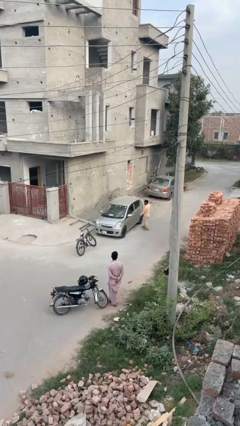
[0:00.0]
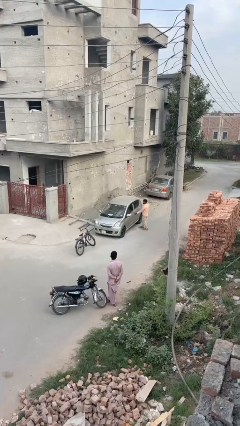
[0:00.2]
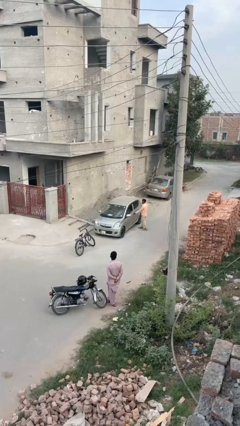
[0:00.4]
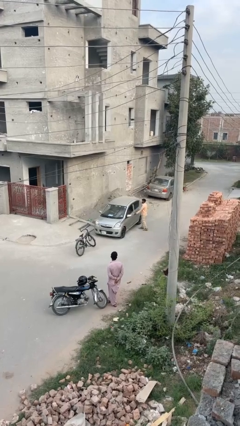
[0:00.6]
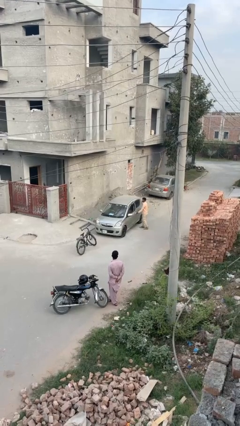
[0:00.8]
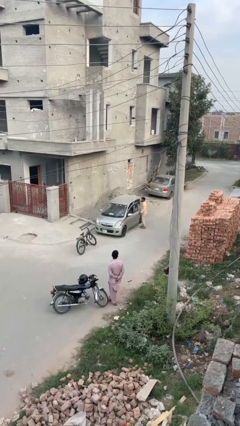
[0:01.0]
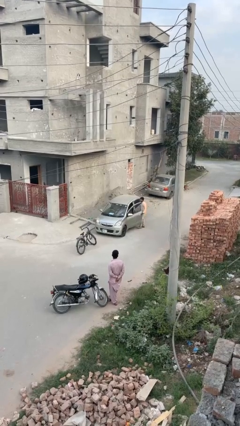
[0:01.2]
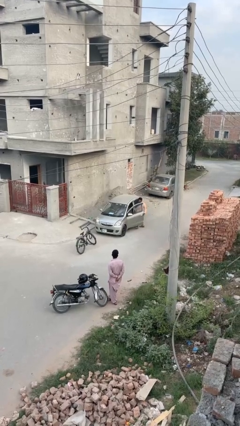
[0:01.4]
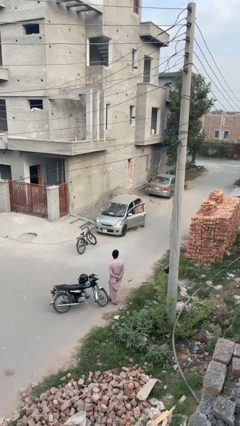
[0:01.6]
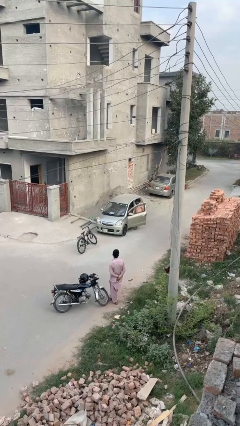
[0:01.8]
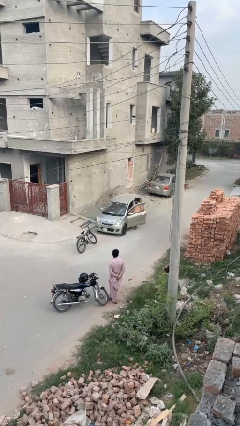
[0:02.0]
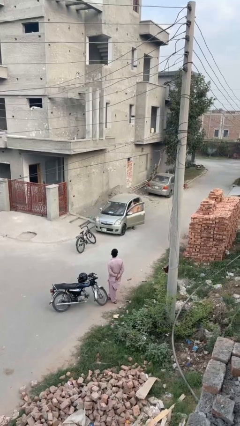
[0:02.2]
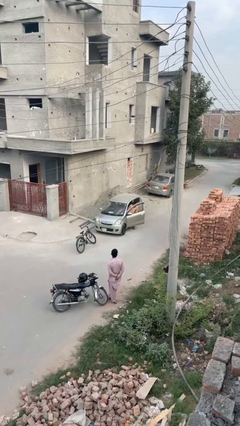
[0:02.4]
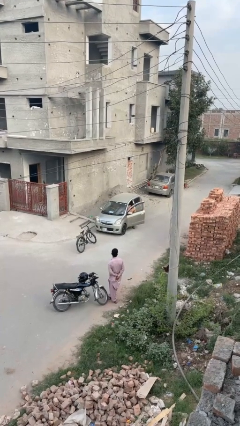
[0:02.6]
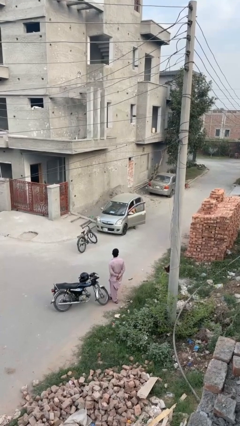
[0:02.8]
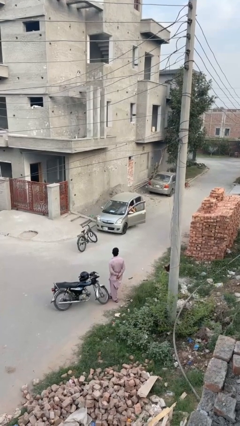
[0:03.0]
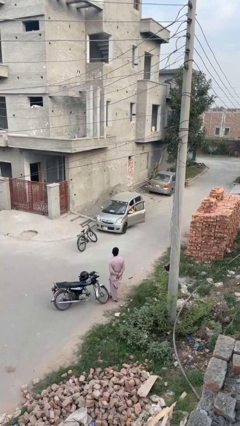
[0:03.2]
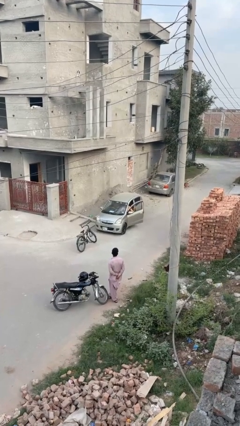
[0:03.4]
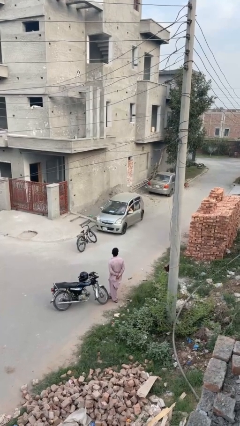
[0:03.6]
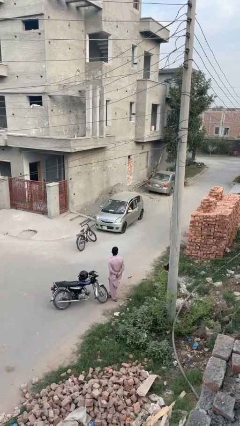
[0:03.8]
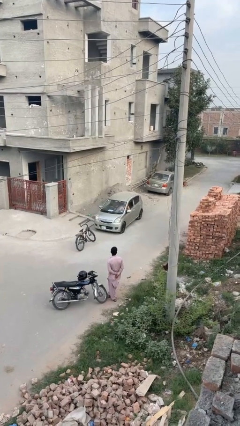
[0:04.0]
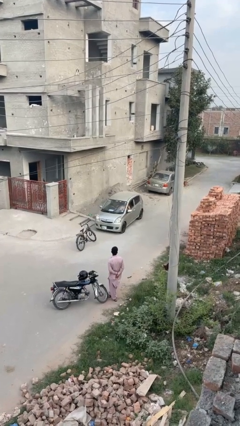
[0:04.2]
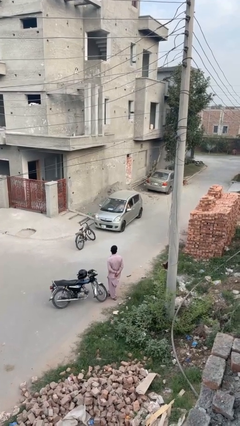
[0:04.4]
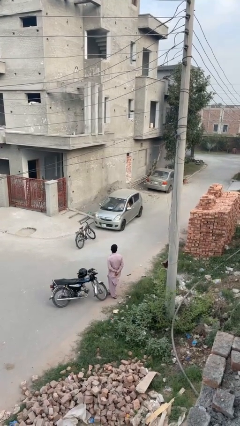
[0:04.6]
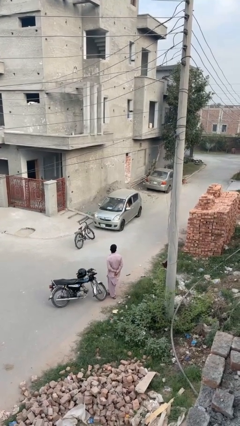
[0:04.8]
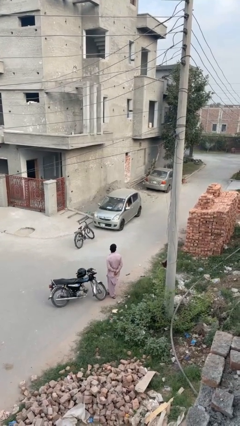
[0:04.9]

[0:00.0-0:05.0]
car picks up person

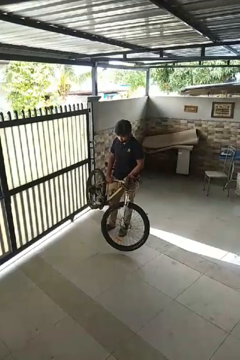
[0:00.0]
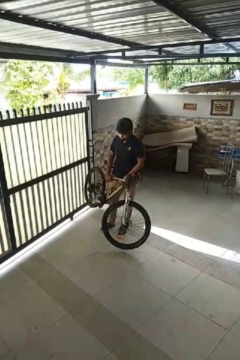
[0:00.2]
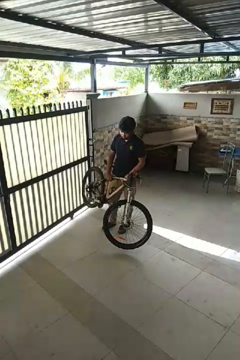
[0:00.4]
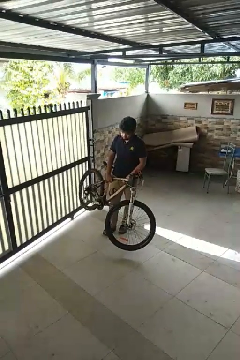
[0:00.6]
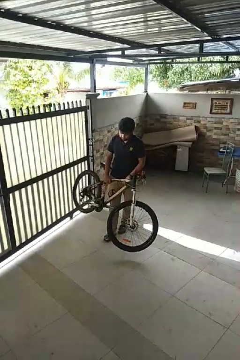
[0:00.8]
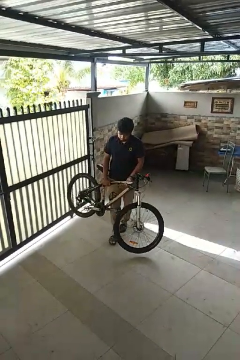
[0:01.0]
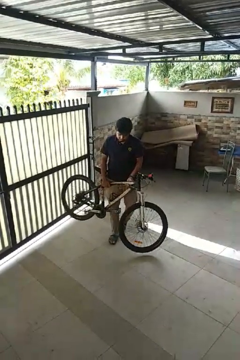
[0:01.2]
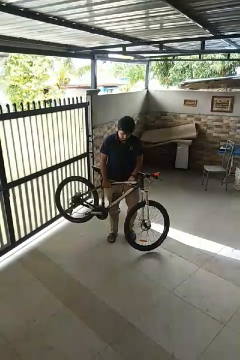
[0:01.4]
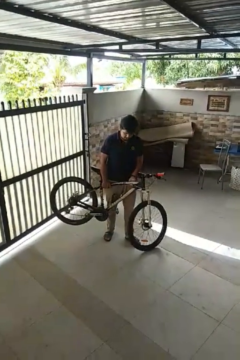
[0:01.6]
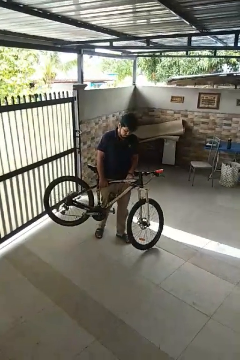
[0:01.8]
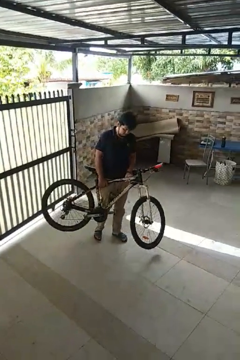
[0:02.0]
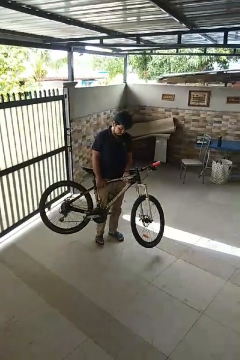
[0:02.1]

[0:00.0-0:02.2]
person carries bicycle

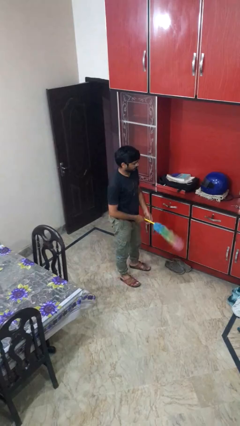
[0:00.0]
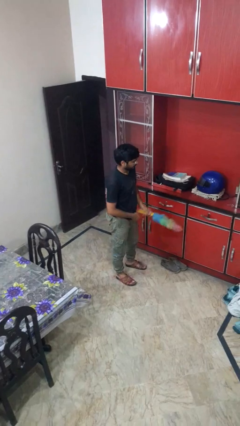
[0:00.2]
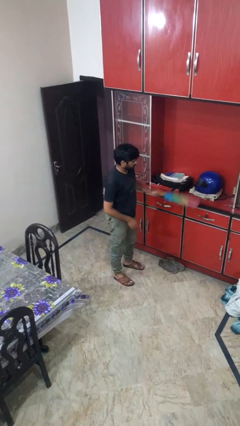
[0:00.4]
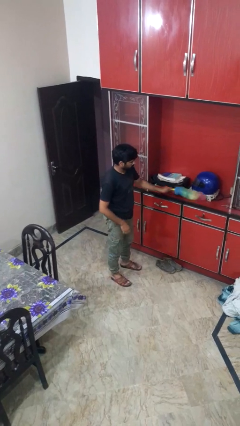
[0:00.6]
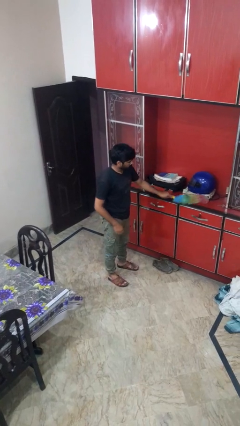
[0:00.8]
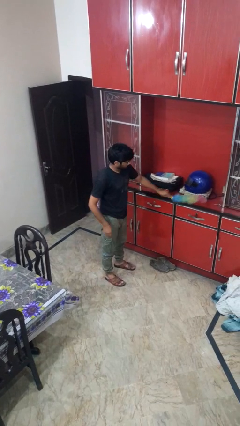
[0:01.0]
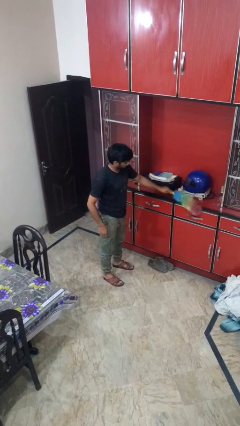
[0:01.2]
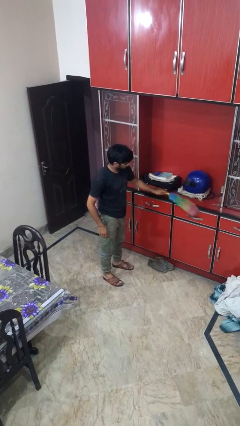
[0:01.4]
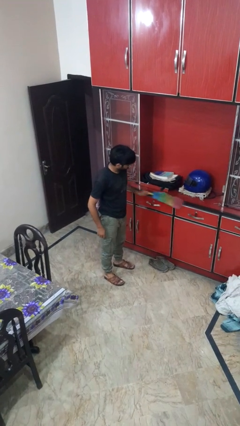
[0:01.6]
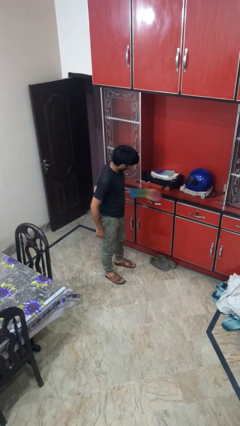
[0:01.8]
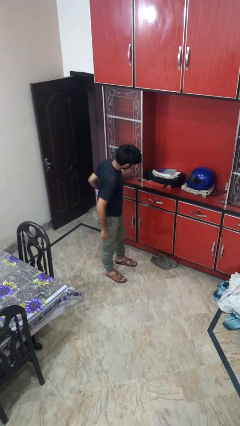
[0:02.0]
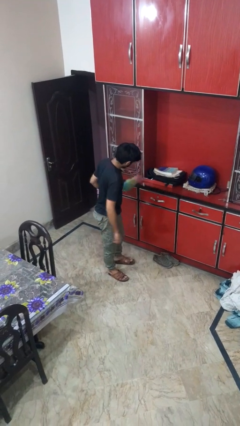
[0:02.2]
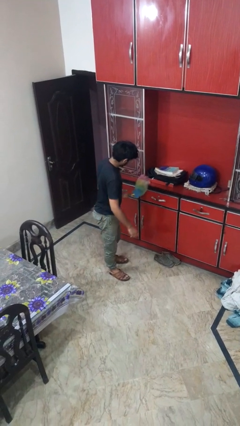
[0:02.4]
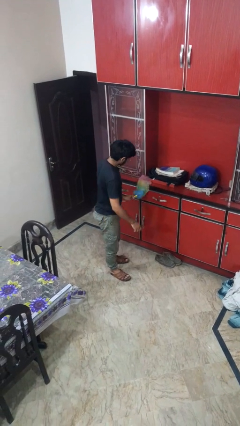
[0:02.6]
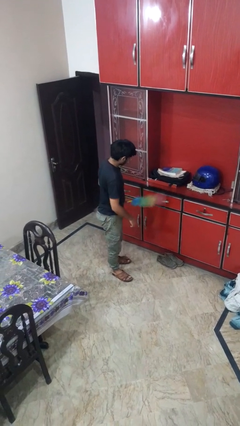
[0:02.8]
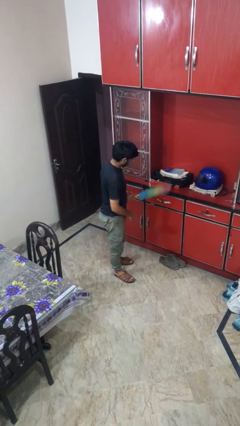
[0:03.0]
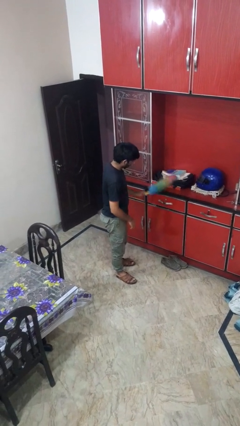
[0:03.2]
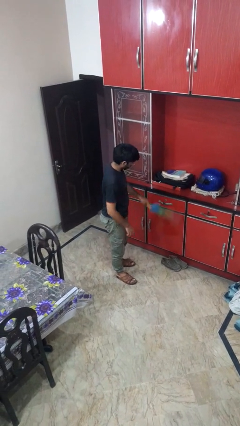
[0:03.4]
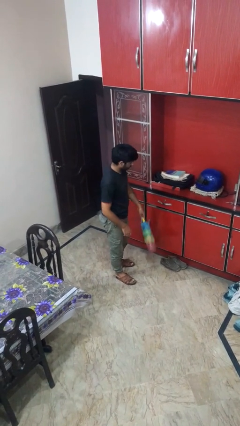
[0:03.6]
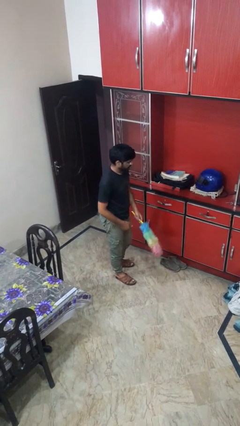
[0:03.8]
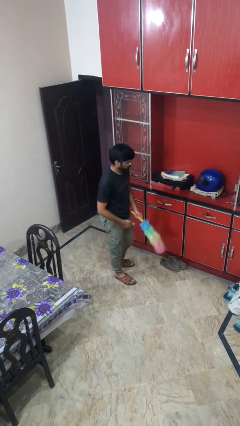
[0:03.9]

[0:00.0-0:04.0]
person dusts furniture

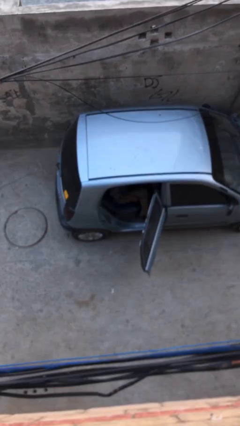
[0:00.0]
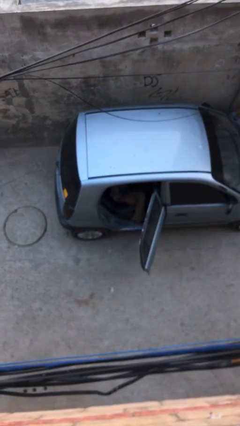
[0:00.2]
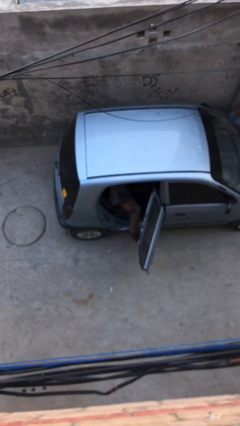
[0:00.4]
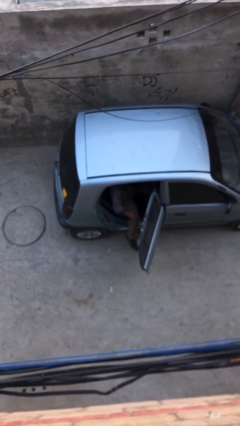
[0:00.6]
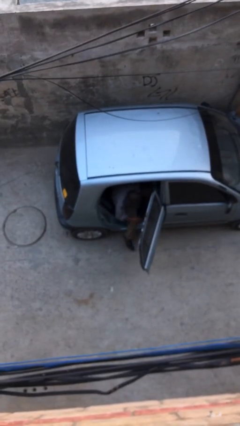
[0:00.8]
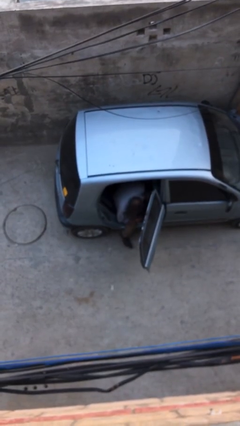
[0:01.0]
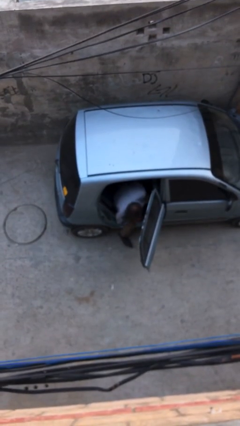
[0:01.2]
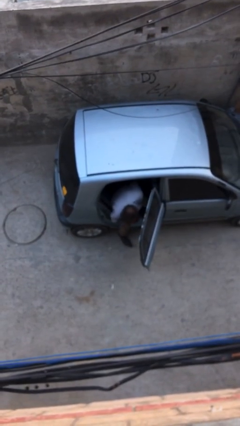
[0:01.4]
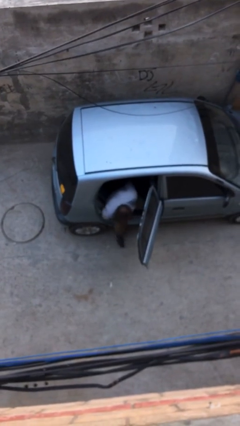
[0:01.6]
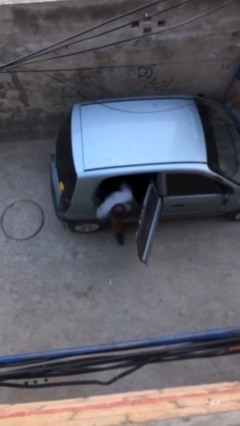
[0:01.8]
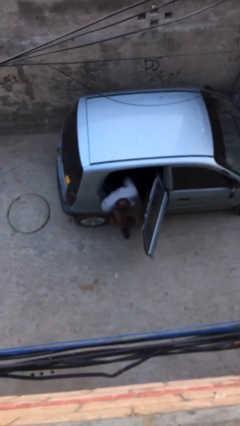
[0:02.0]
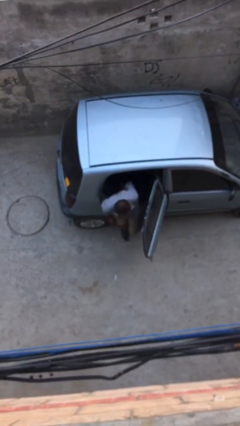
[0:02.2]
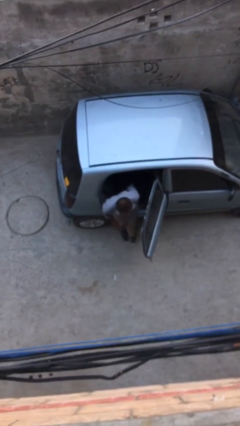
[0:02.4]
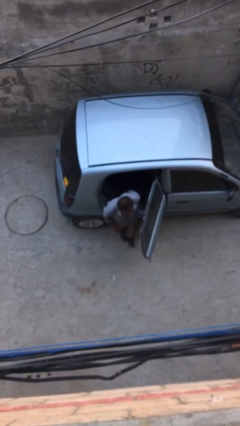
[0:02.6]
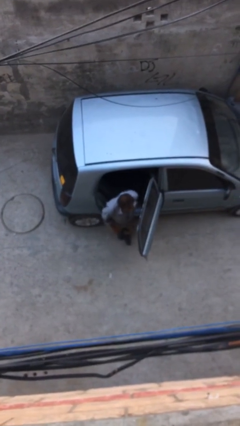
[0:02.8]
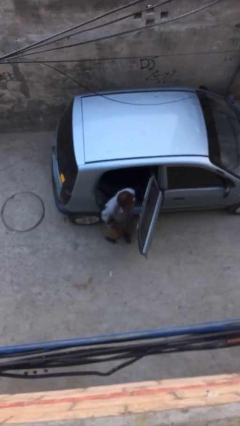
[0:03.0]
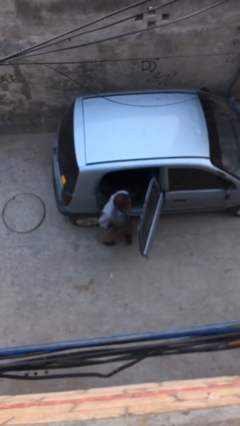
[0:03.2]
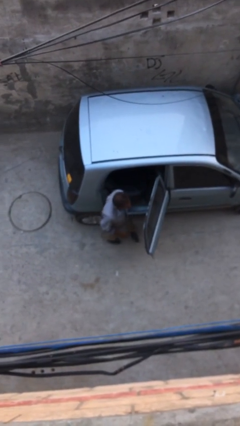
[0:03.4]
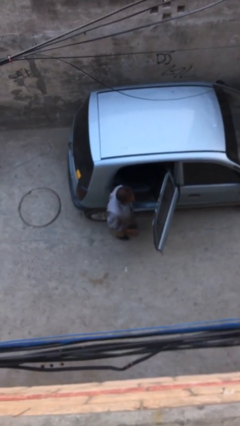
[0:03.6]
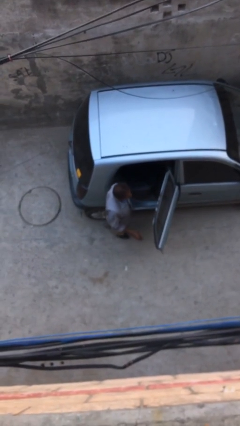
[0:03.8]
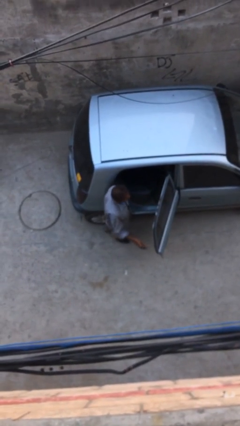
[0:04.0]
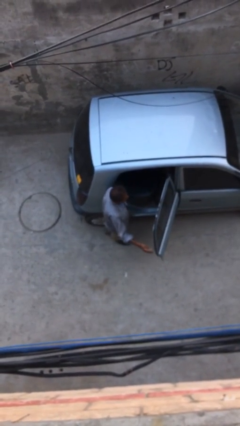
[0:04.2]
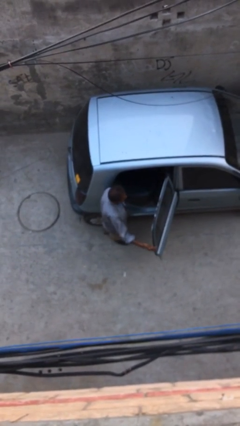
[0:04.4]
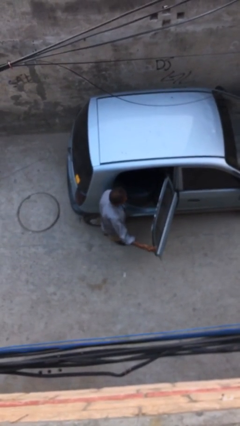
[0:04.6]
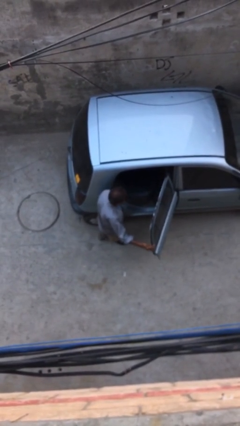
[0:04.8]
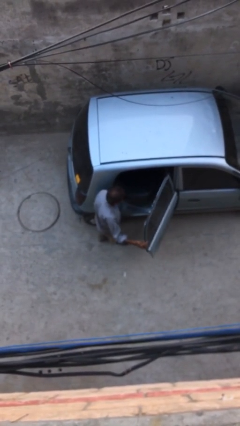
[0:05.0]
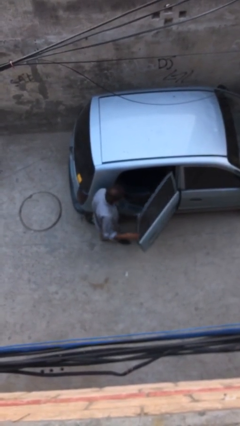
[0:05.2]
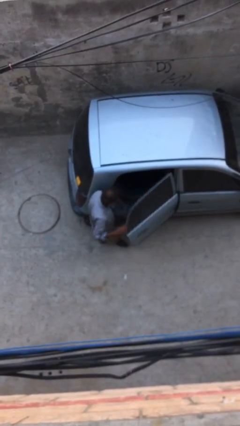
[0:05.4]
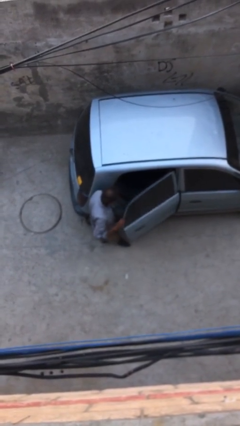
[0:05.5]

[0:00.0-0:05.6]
person exits car

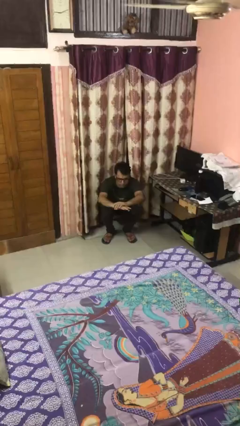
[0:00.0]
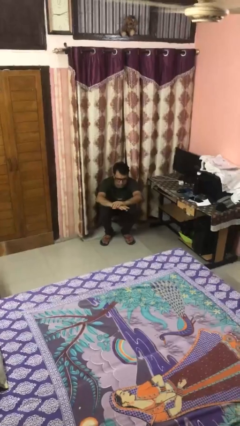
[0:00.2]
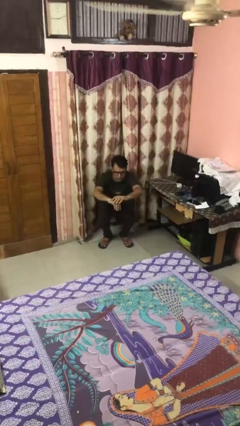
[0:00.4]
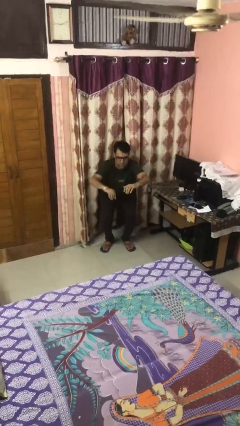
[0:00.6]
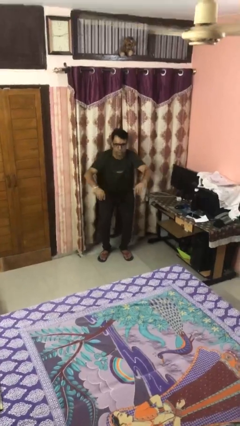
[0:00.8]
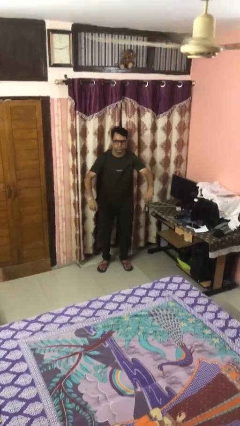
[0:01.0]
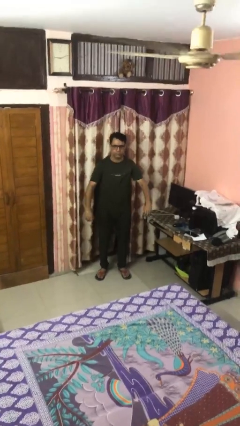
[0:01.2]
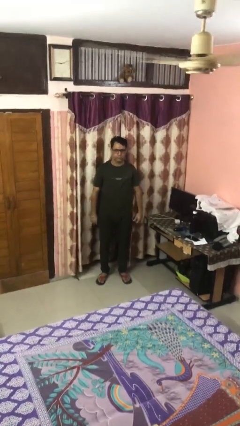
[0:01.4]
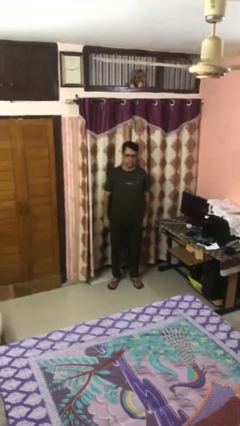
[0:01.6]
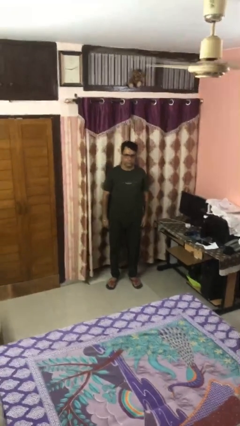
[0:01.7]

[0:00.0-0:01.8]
person stands up
